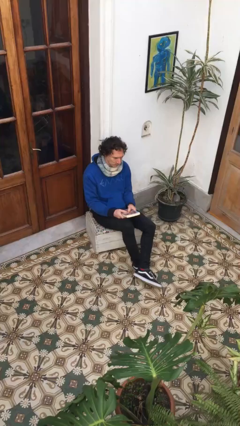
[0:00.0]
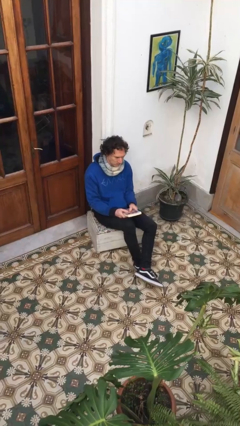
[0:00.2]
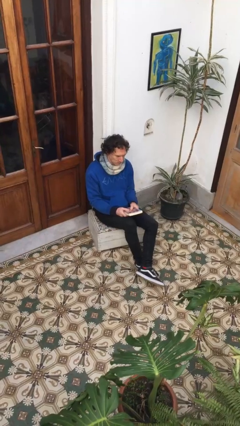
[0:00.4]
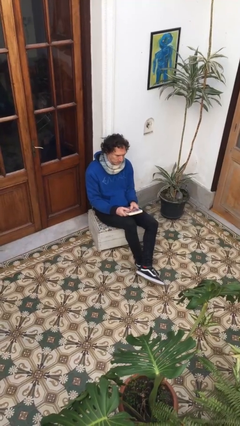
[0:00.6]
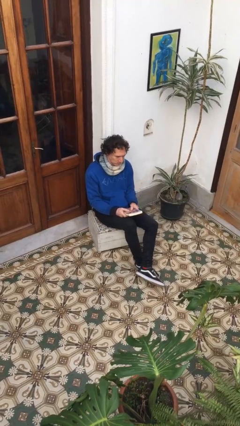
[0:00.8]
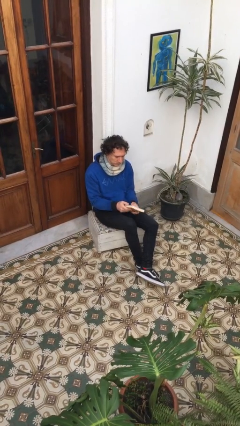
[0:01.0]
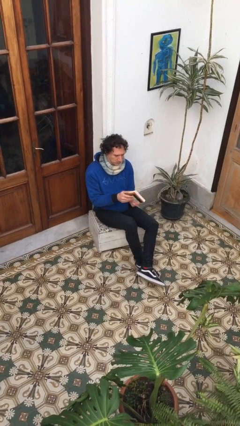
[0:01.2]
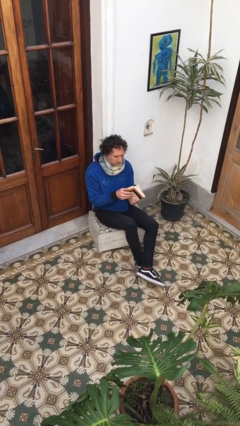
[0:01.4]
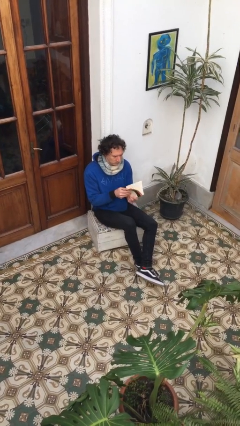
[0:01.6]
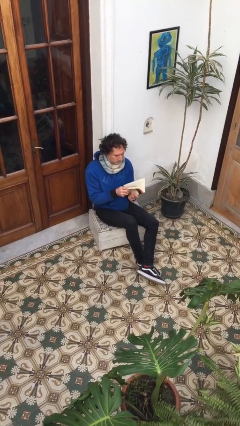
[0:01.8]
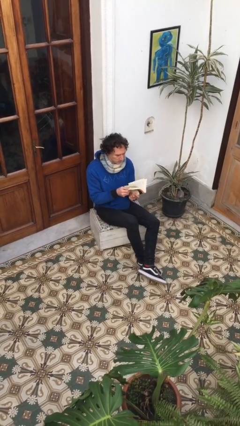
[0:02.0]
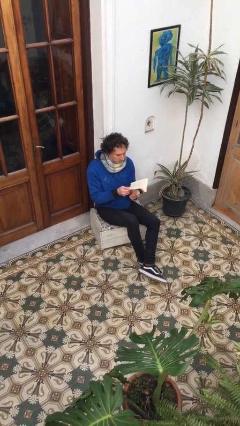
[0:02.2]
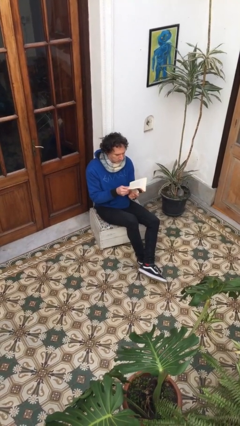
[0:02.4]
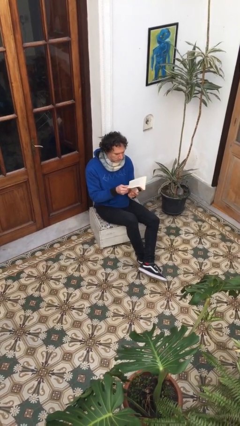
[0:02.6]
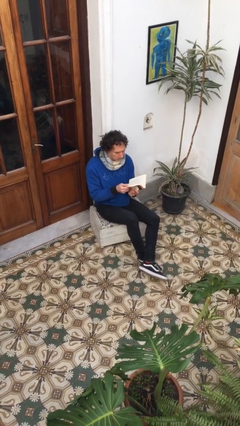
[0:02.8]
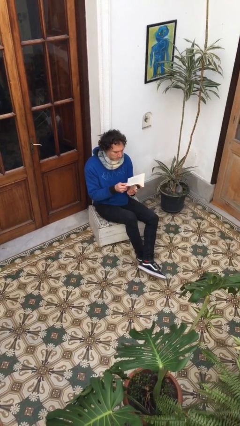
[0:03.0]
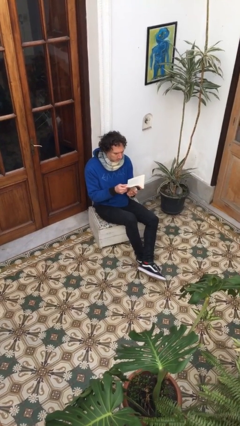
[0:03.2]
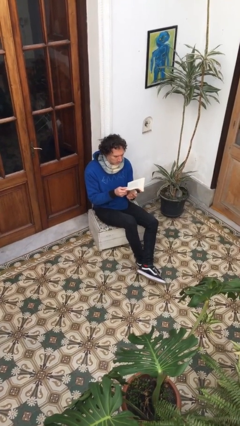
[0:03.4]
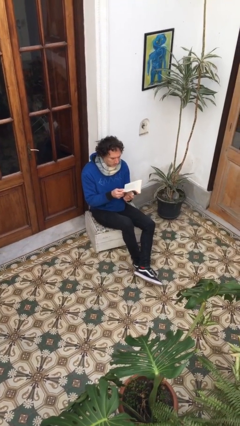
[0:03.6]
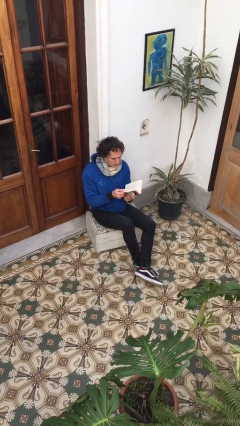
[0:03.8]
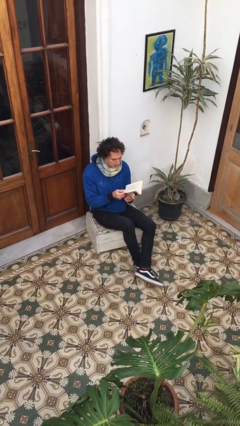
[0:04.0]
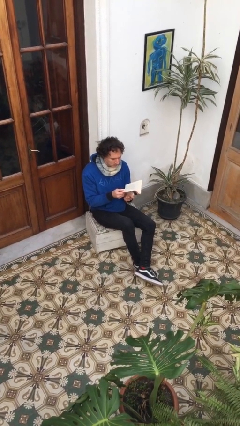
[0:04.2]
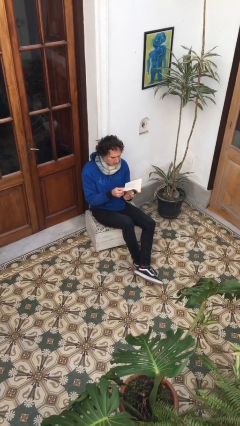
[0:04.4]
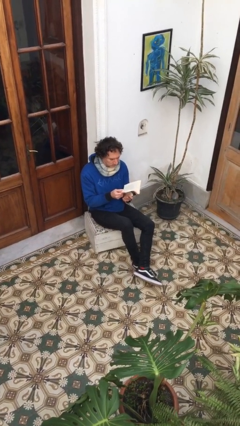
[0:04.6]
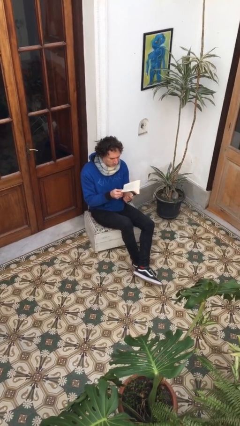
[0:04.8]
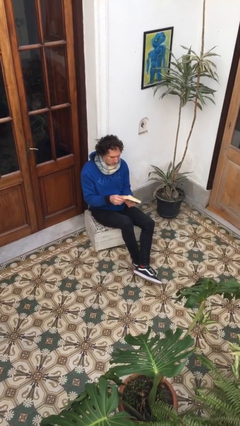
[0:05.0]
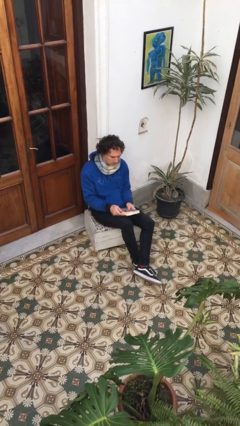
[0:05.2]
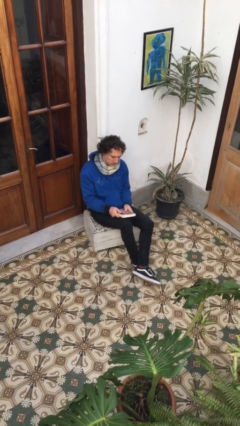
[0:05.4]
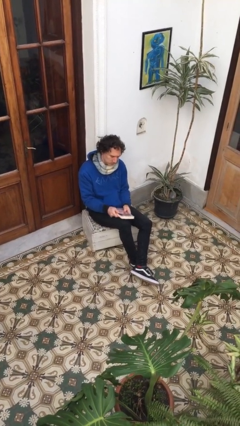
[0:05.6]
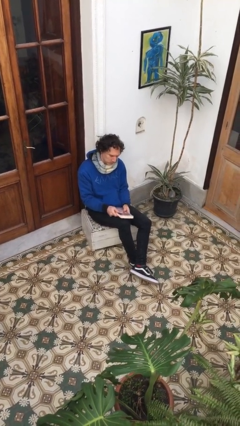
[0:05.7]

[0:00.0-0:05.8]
person reads book

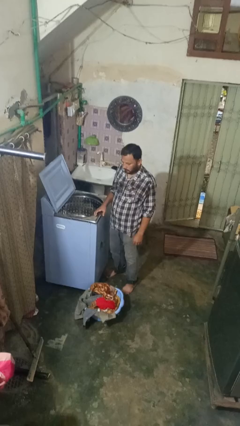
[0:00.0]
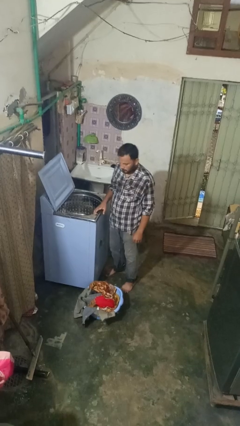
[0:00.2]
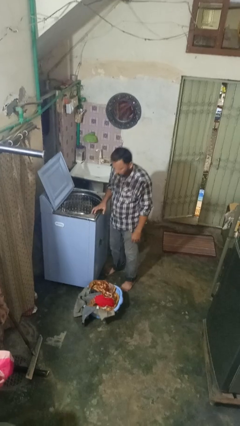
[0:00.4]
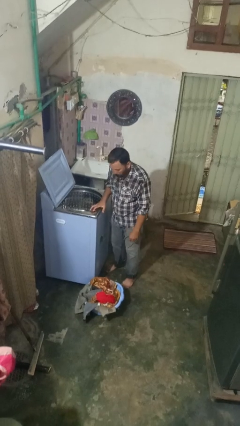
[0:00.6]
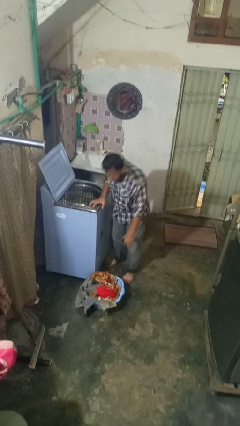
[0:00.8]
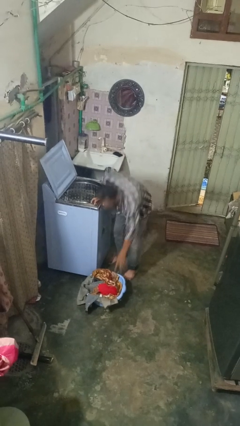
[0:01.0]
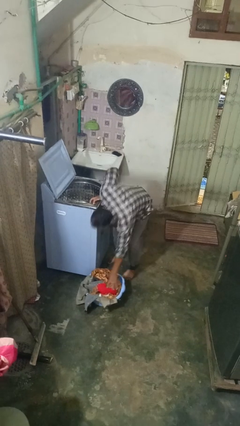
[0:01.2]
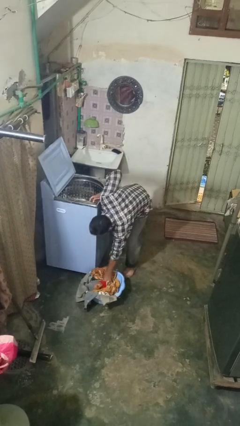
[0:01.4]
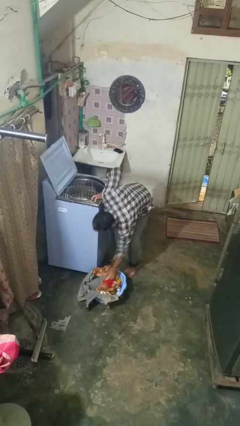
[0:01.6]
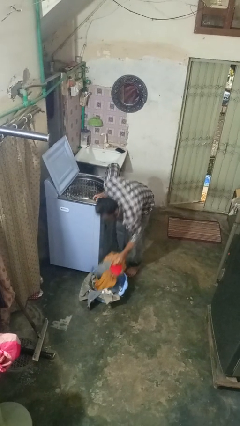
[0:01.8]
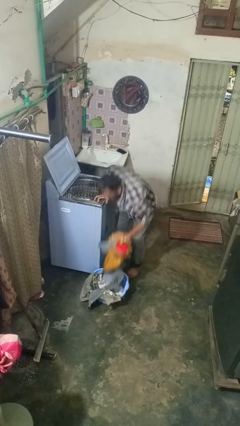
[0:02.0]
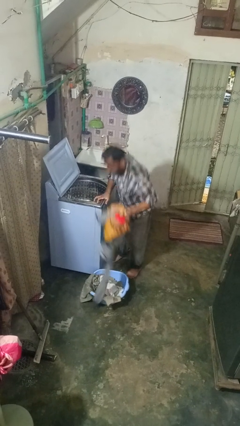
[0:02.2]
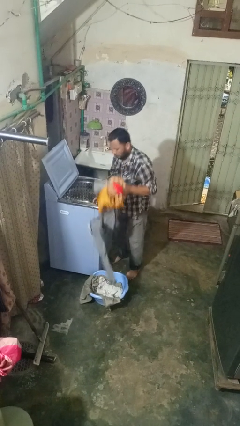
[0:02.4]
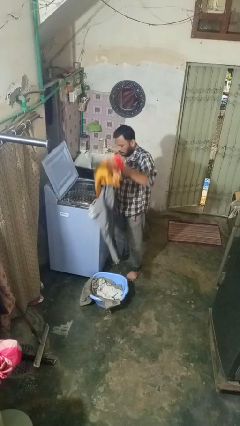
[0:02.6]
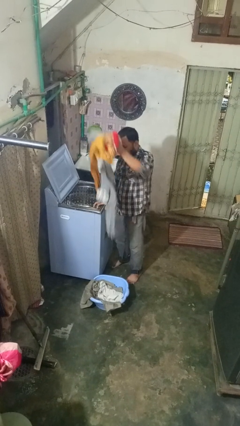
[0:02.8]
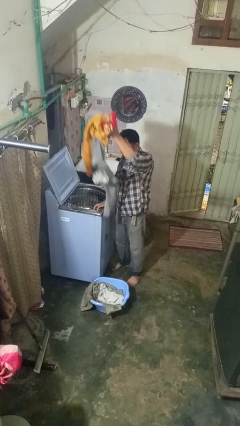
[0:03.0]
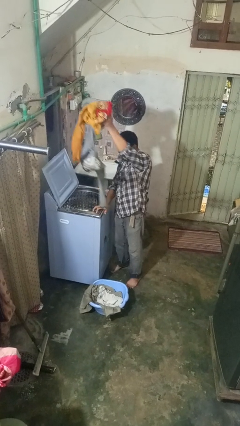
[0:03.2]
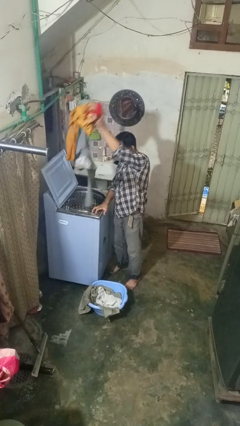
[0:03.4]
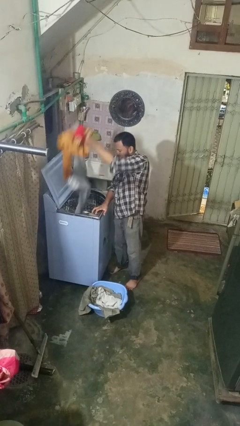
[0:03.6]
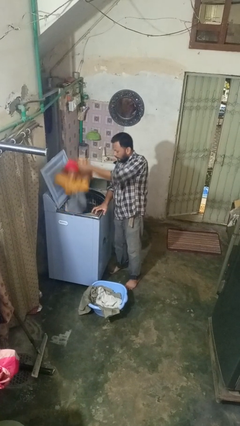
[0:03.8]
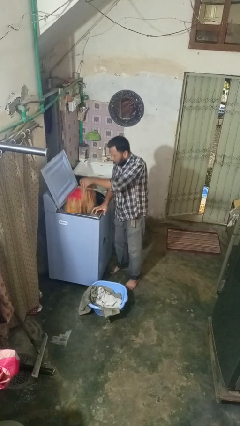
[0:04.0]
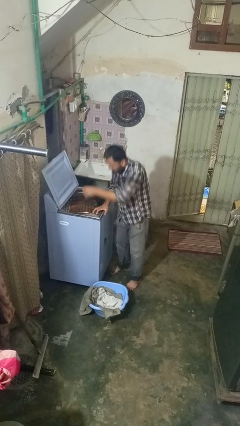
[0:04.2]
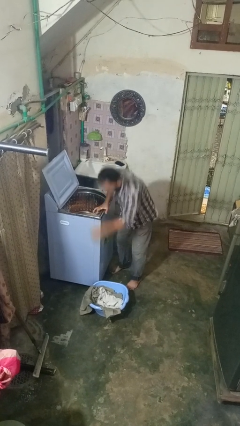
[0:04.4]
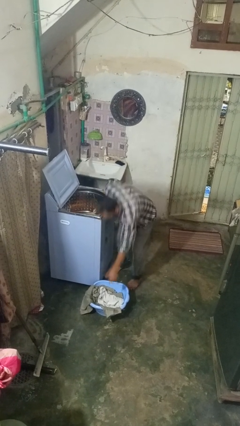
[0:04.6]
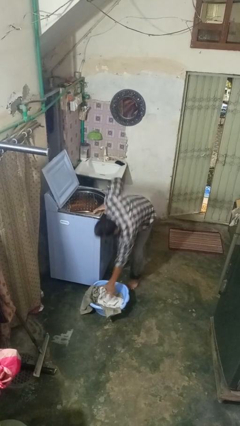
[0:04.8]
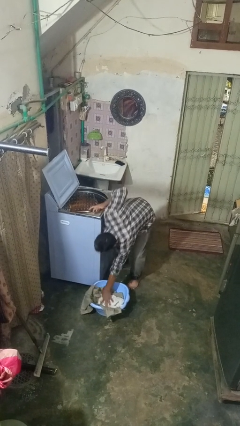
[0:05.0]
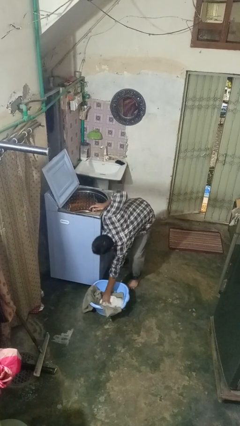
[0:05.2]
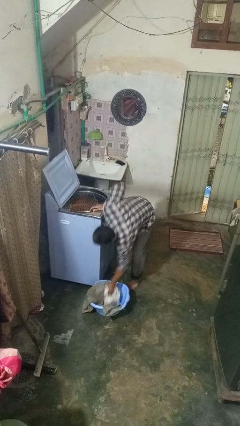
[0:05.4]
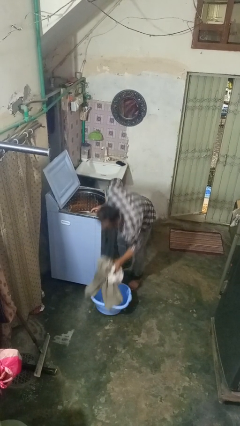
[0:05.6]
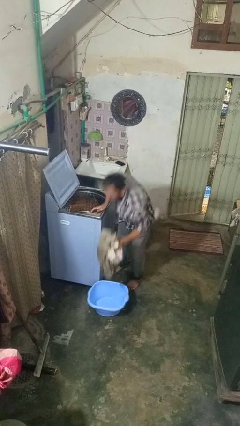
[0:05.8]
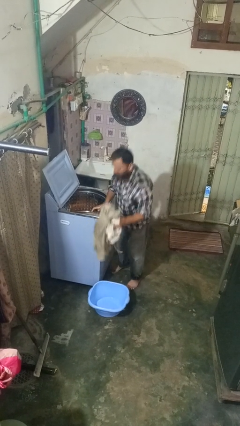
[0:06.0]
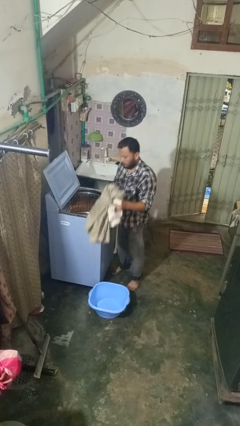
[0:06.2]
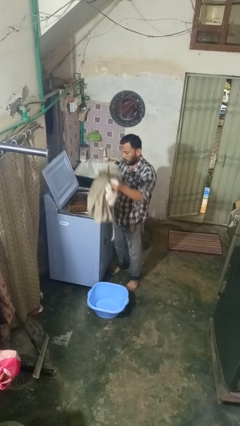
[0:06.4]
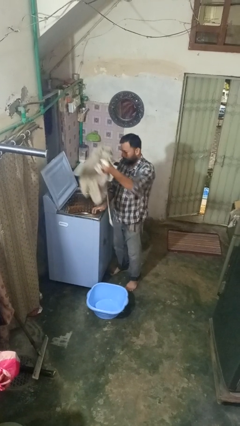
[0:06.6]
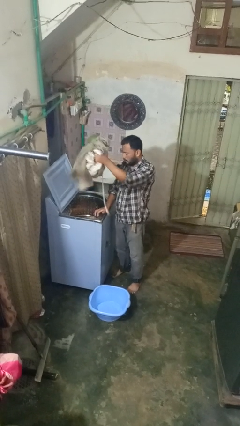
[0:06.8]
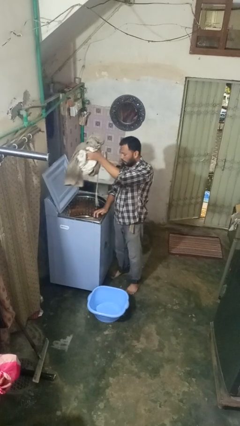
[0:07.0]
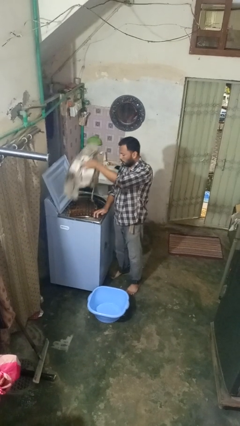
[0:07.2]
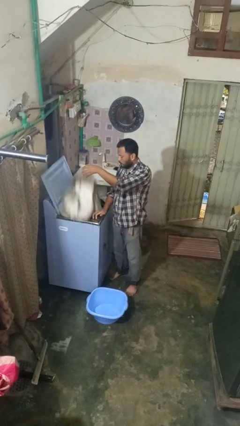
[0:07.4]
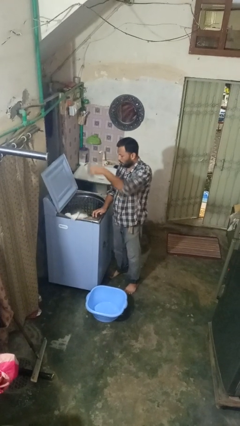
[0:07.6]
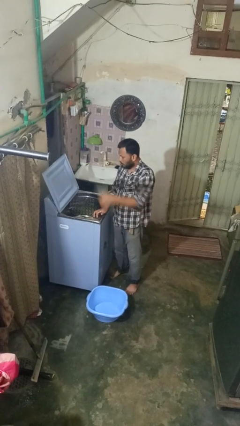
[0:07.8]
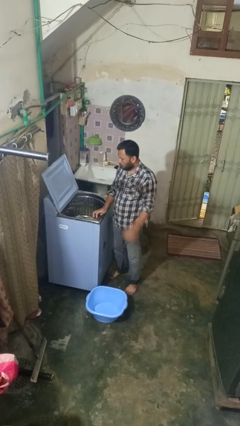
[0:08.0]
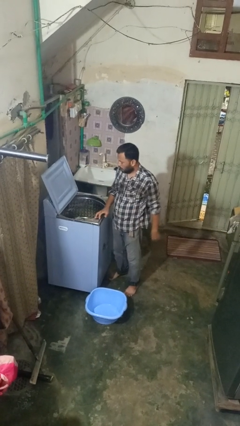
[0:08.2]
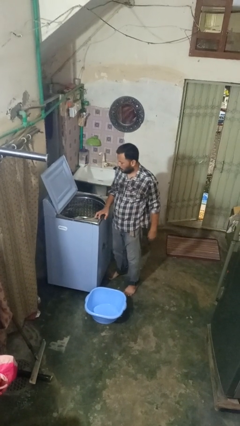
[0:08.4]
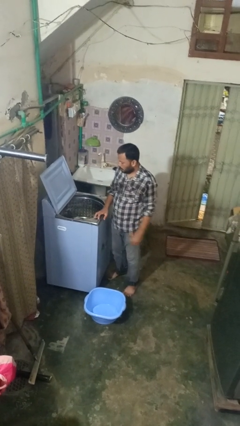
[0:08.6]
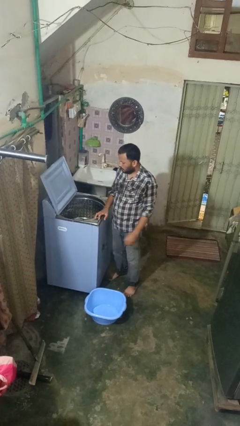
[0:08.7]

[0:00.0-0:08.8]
person loads clotheswasher

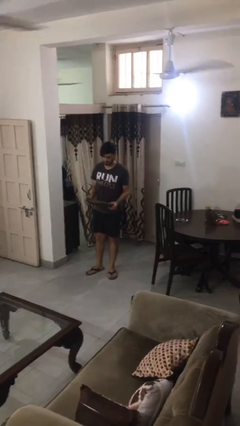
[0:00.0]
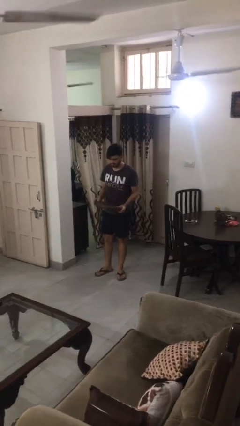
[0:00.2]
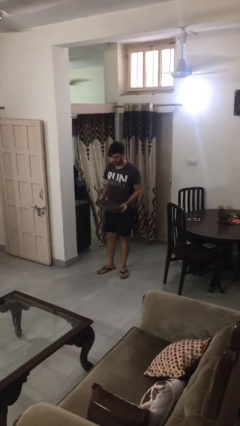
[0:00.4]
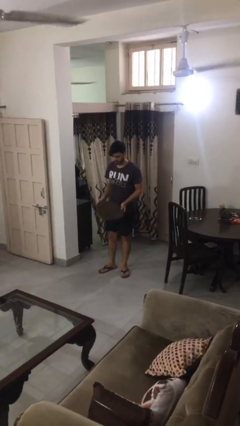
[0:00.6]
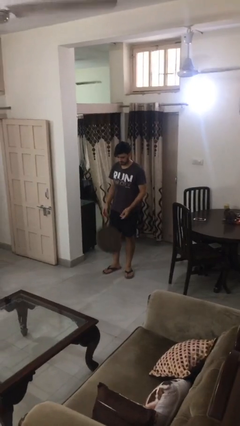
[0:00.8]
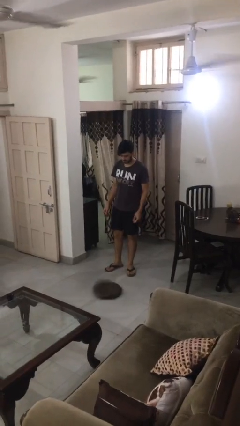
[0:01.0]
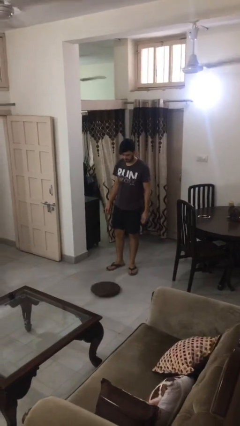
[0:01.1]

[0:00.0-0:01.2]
person drops object

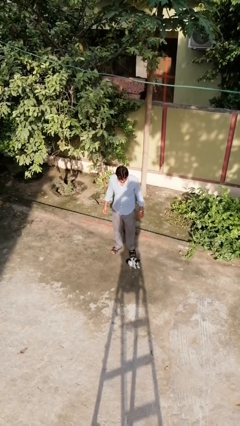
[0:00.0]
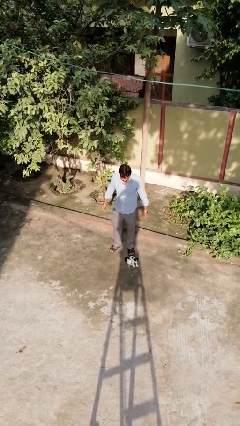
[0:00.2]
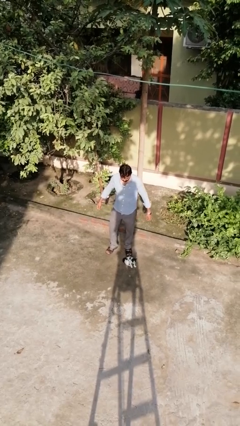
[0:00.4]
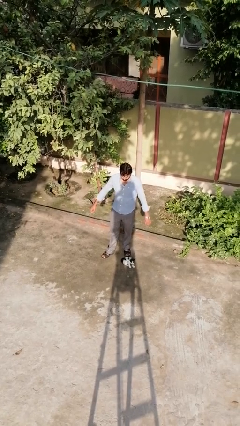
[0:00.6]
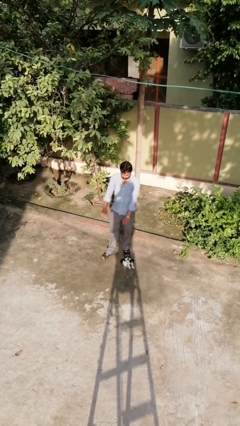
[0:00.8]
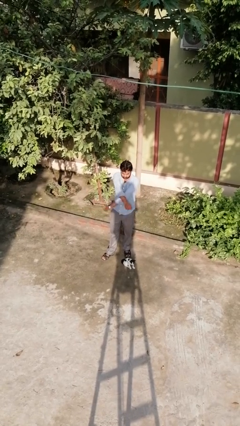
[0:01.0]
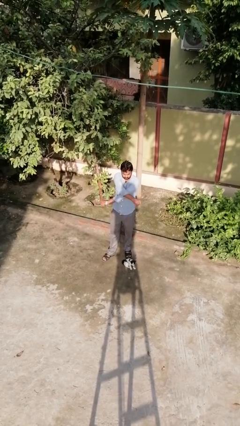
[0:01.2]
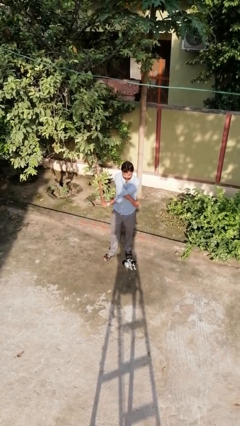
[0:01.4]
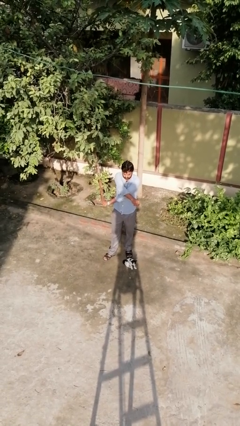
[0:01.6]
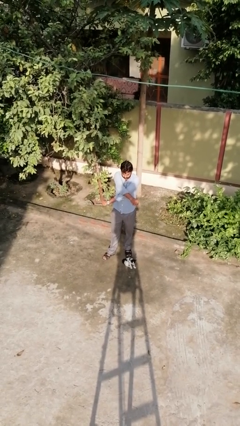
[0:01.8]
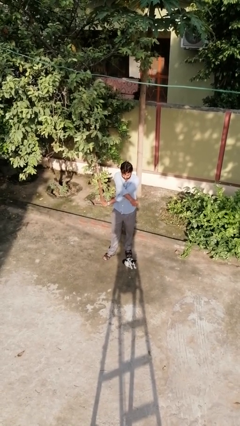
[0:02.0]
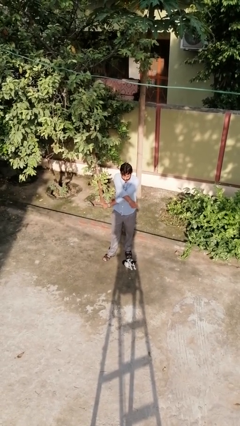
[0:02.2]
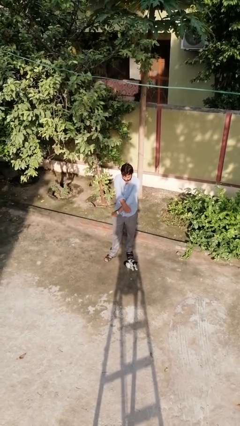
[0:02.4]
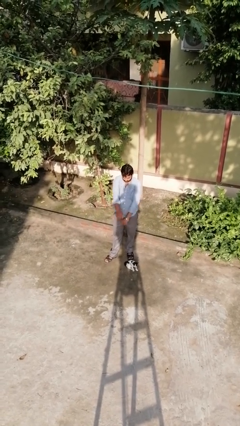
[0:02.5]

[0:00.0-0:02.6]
person crosses arms
